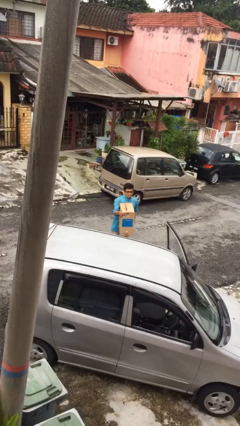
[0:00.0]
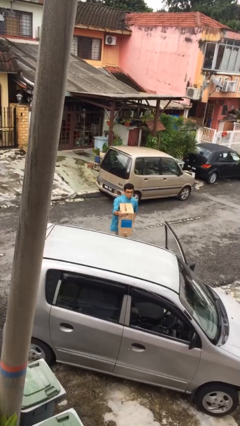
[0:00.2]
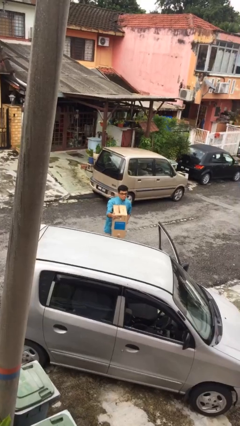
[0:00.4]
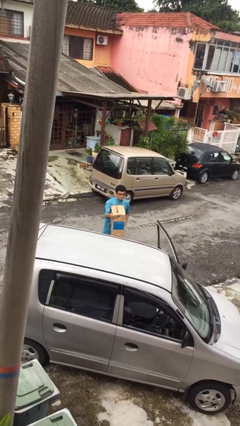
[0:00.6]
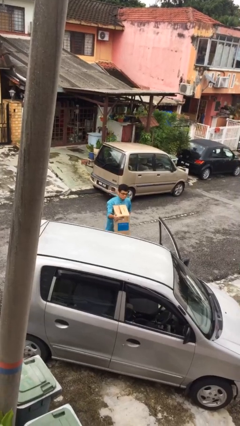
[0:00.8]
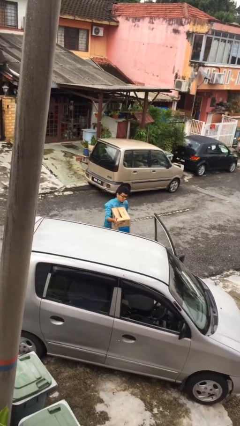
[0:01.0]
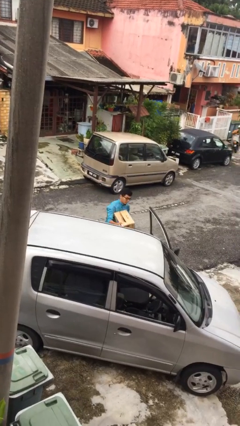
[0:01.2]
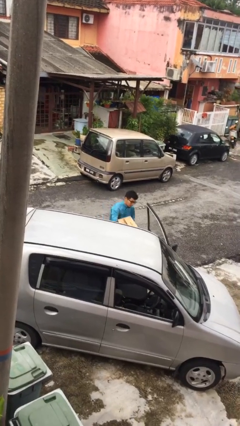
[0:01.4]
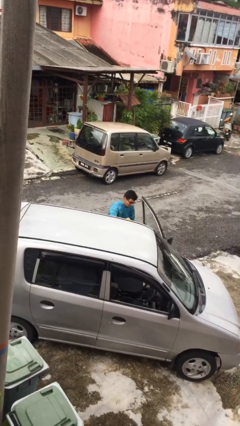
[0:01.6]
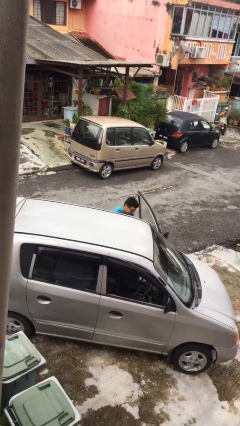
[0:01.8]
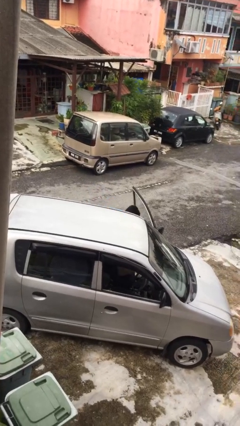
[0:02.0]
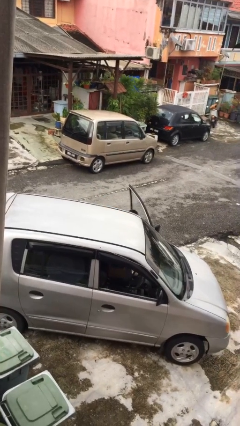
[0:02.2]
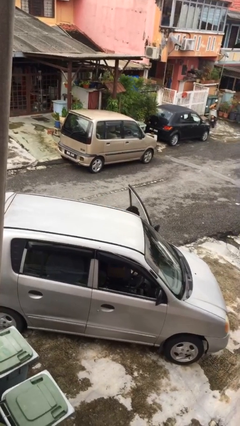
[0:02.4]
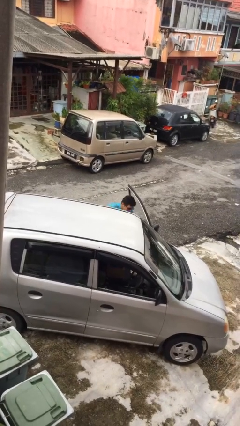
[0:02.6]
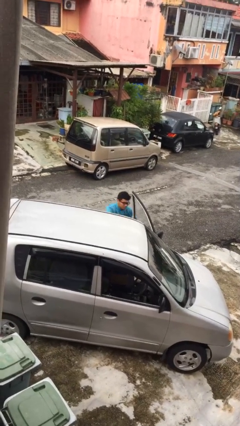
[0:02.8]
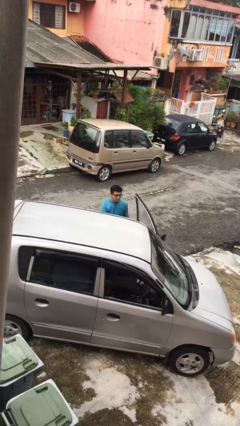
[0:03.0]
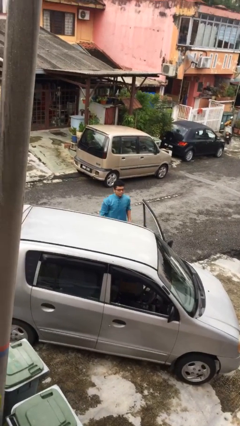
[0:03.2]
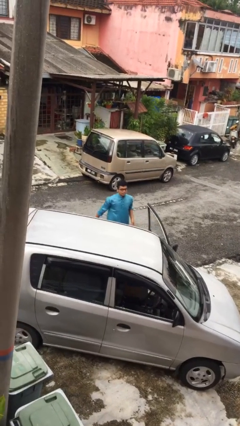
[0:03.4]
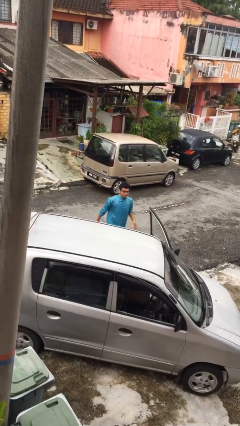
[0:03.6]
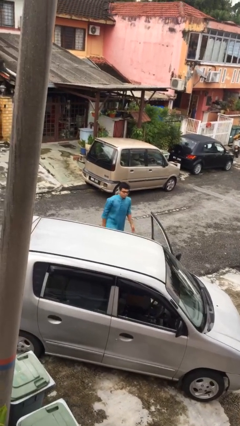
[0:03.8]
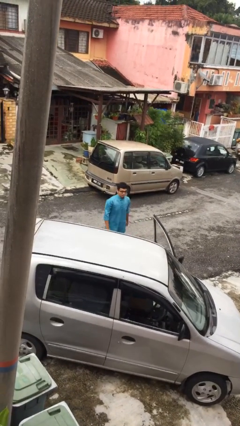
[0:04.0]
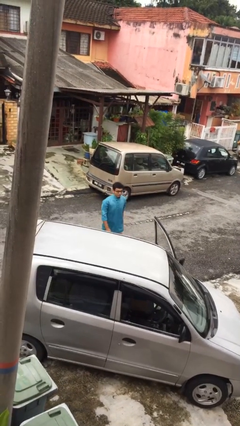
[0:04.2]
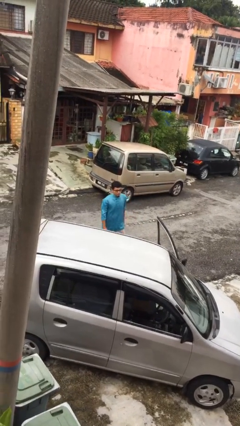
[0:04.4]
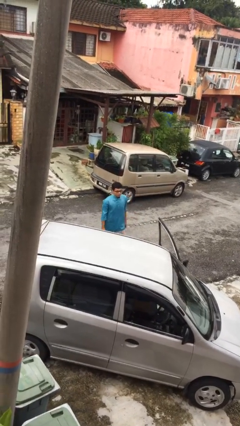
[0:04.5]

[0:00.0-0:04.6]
person loads car

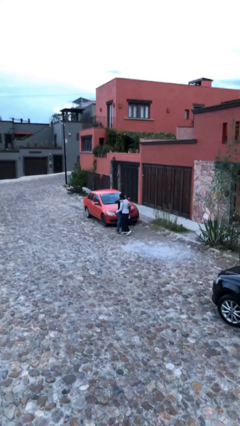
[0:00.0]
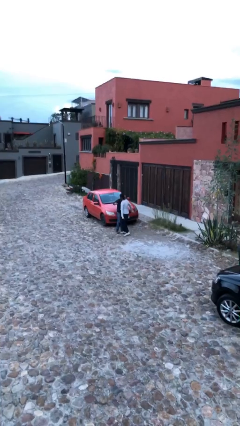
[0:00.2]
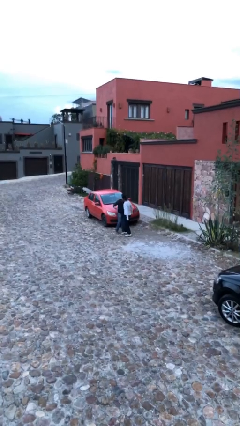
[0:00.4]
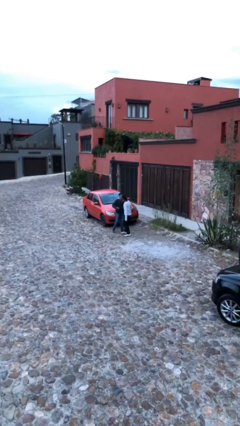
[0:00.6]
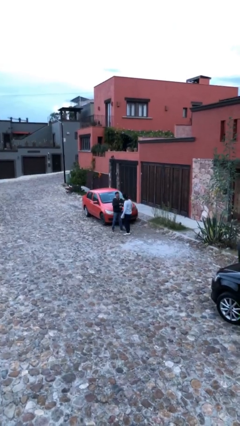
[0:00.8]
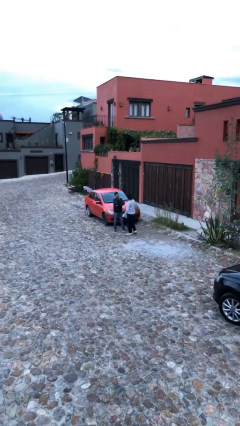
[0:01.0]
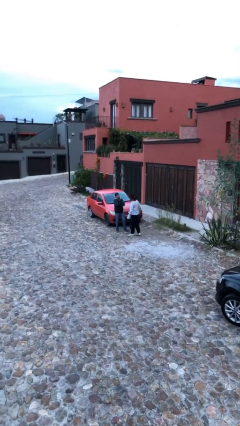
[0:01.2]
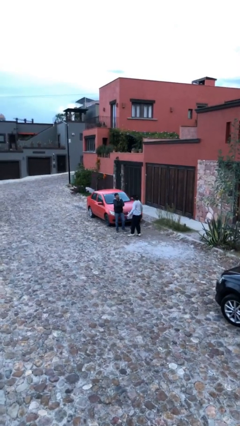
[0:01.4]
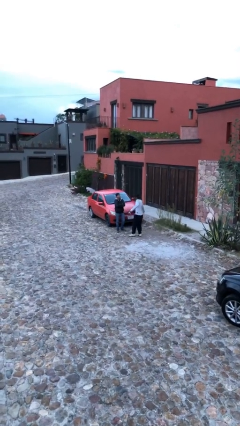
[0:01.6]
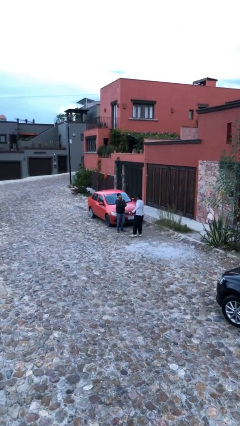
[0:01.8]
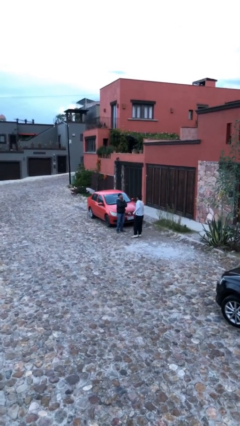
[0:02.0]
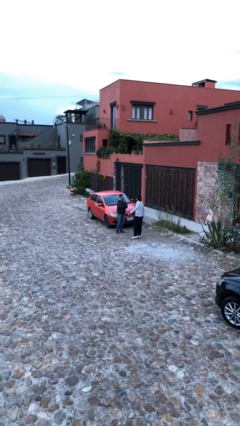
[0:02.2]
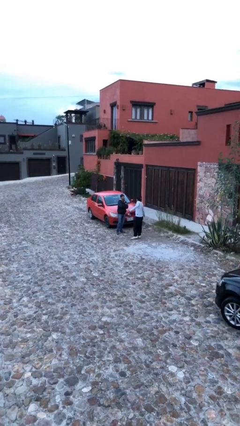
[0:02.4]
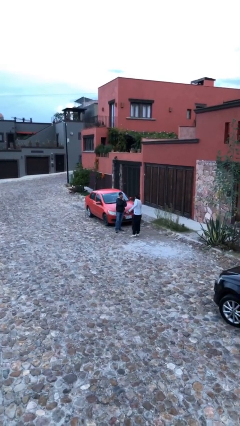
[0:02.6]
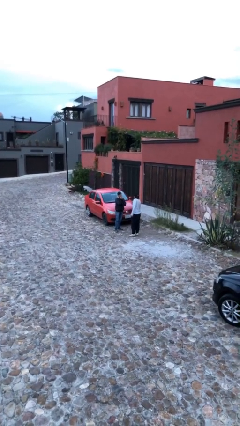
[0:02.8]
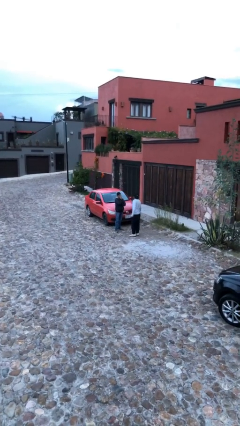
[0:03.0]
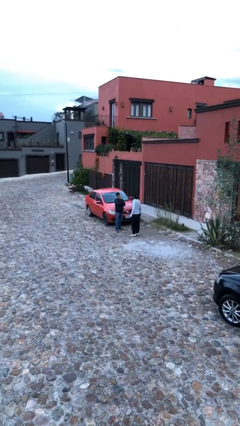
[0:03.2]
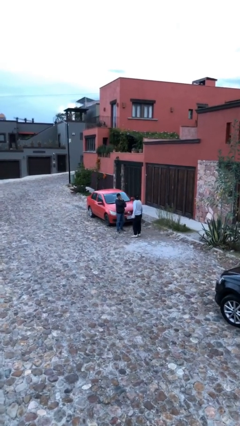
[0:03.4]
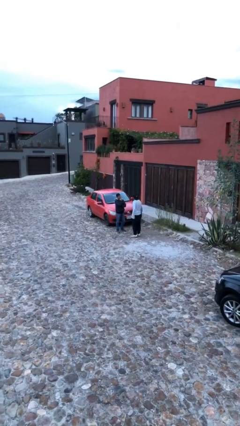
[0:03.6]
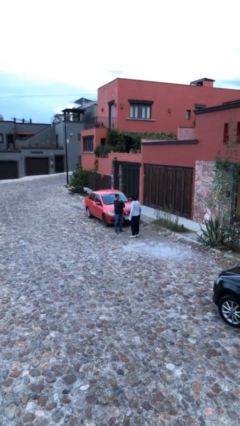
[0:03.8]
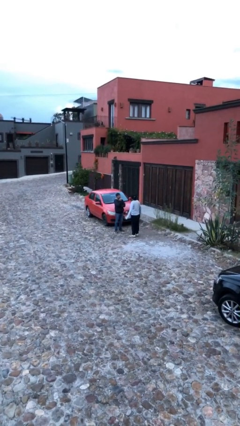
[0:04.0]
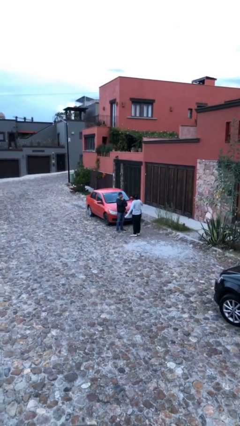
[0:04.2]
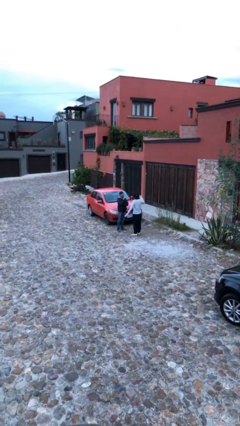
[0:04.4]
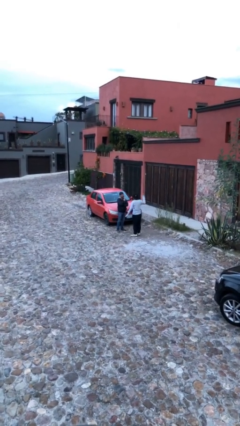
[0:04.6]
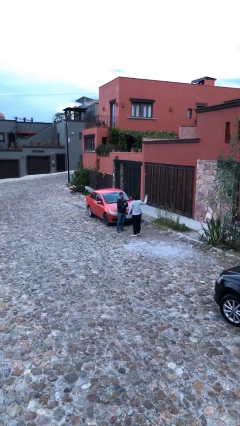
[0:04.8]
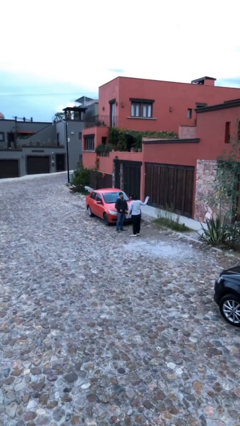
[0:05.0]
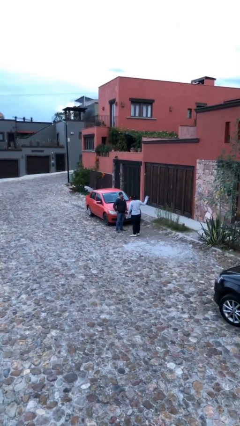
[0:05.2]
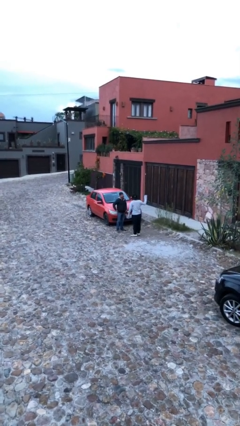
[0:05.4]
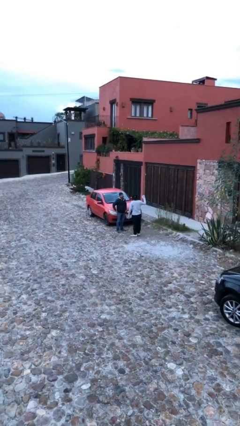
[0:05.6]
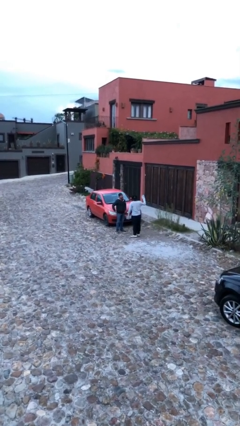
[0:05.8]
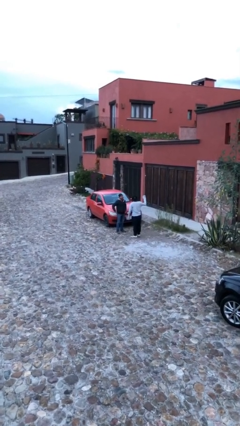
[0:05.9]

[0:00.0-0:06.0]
person talks to person

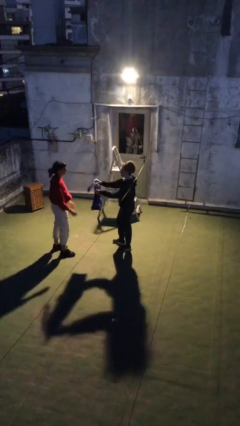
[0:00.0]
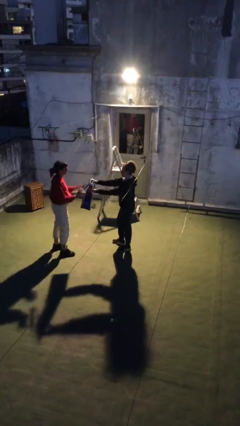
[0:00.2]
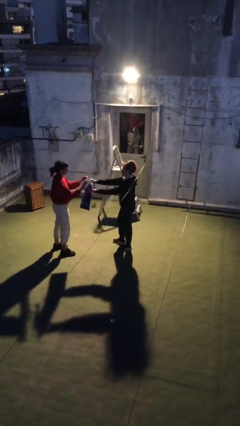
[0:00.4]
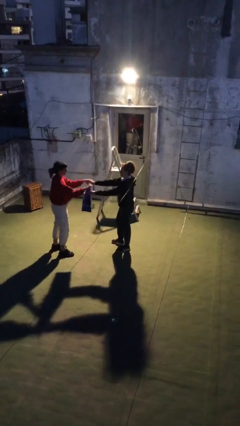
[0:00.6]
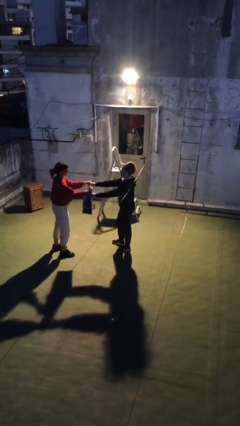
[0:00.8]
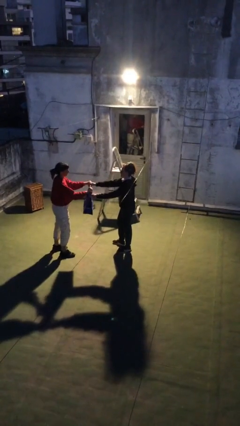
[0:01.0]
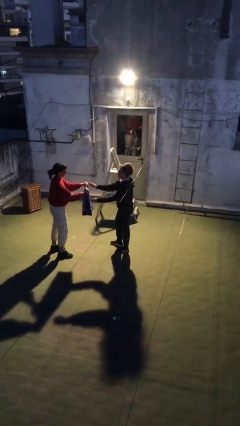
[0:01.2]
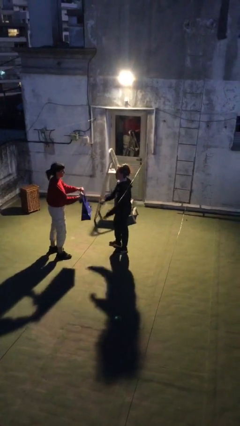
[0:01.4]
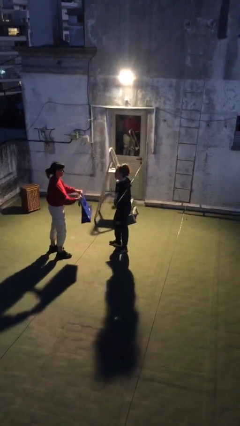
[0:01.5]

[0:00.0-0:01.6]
person transfers object to person

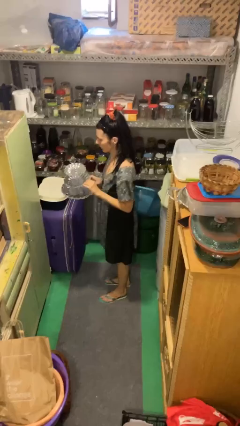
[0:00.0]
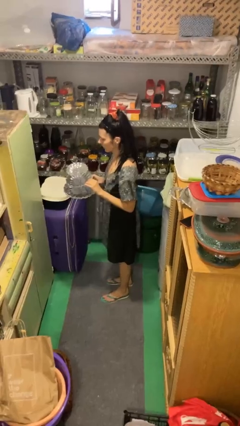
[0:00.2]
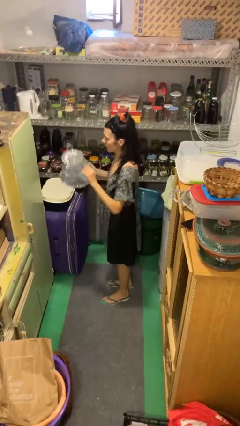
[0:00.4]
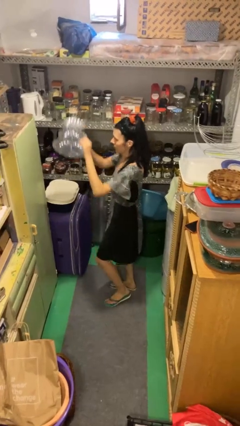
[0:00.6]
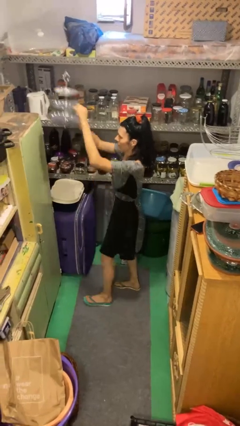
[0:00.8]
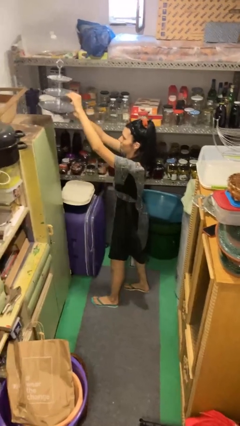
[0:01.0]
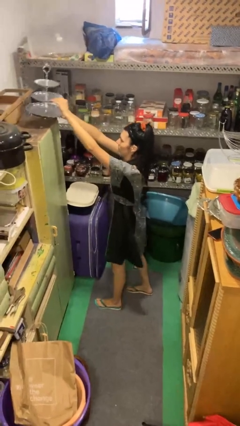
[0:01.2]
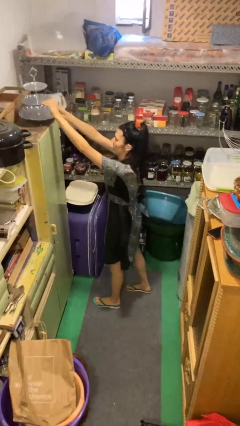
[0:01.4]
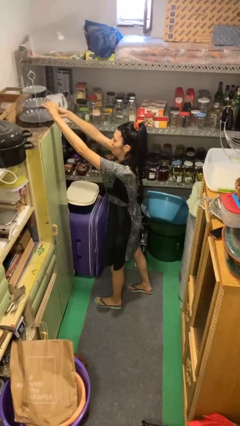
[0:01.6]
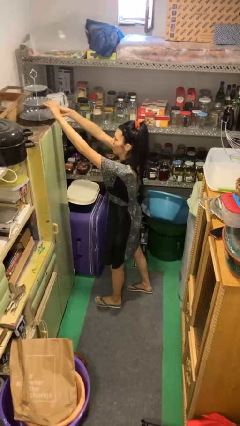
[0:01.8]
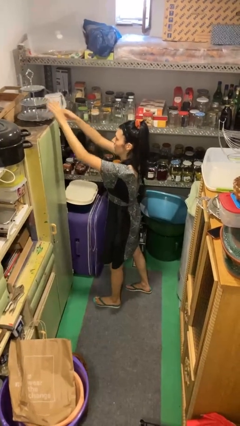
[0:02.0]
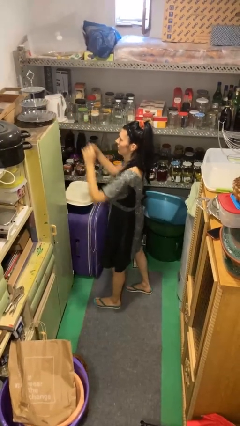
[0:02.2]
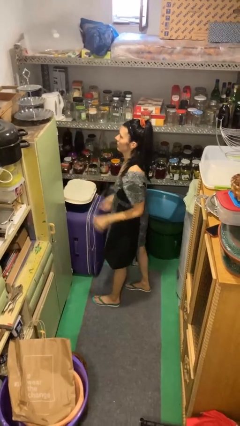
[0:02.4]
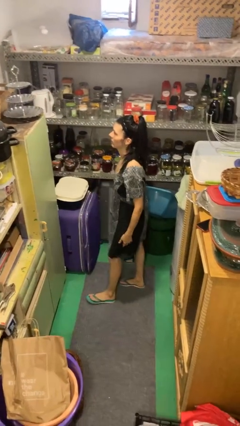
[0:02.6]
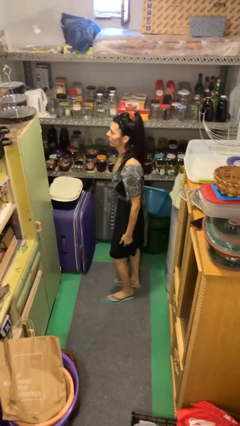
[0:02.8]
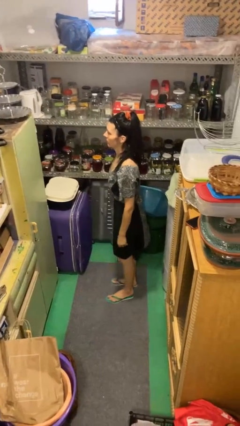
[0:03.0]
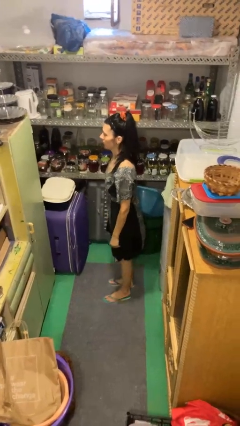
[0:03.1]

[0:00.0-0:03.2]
person puts down object on countertop

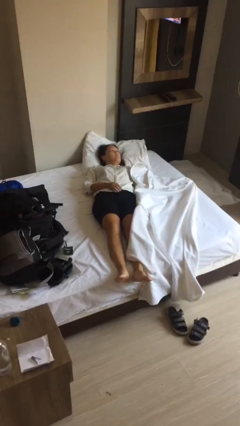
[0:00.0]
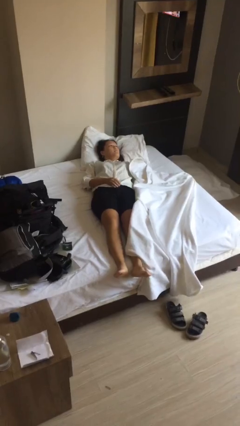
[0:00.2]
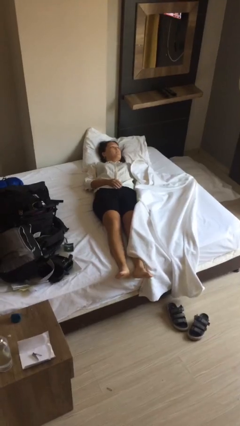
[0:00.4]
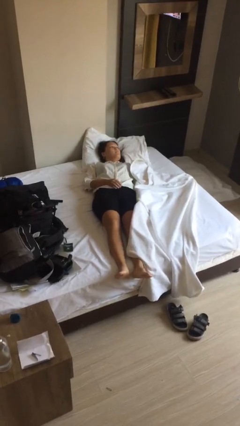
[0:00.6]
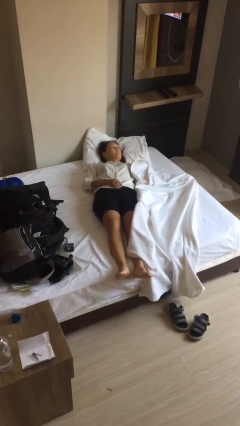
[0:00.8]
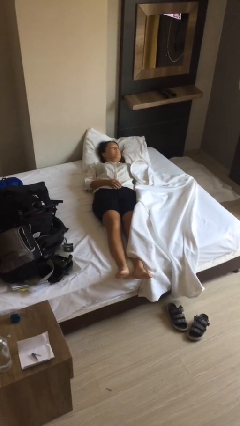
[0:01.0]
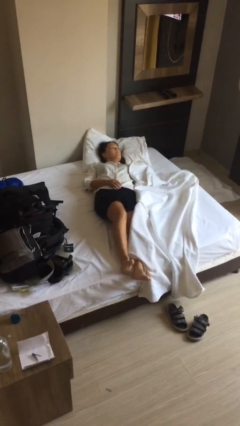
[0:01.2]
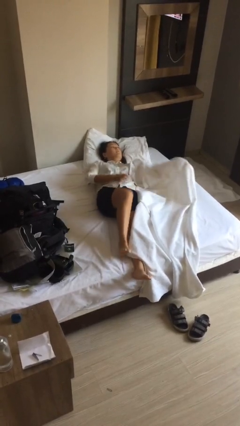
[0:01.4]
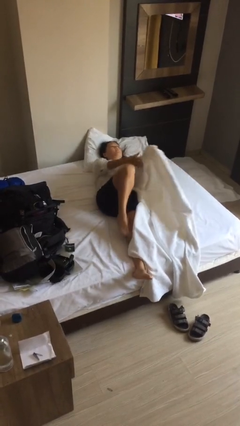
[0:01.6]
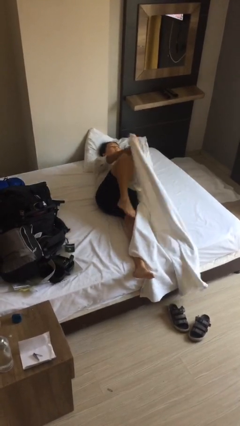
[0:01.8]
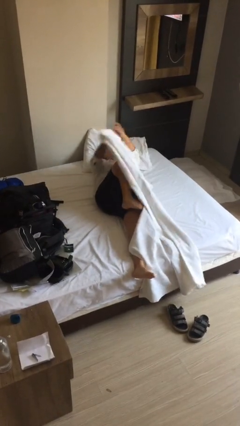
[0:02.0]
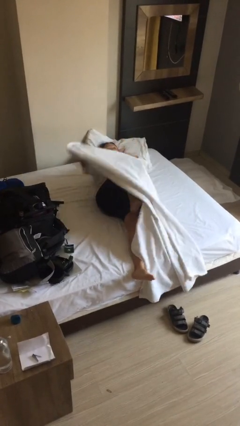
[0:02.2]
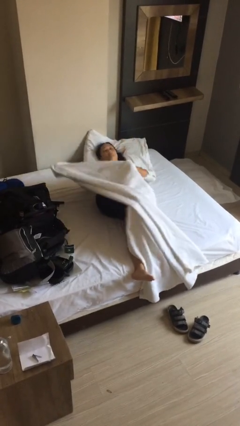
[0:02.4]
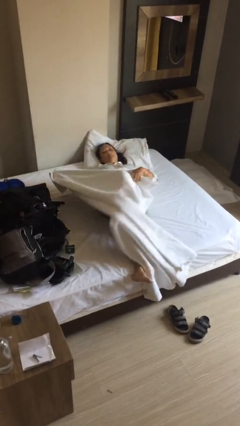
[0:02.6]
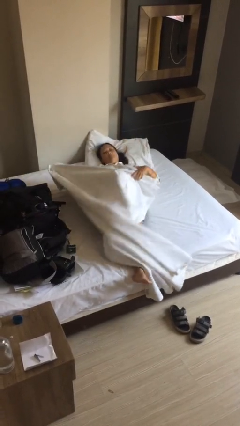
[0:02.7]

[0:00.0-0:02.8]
person covers with bedsheets
